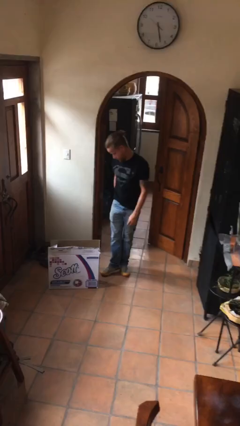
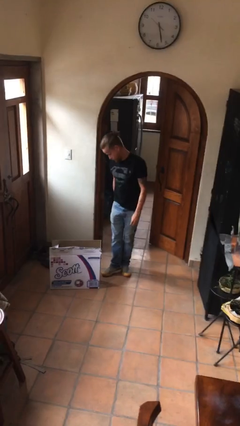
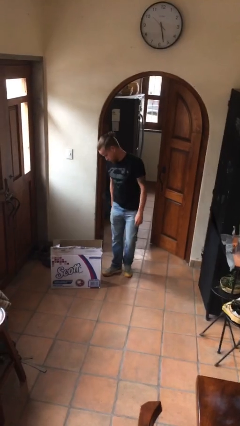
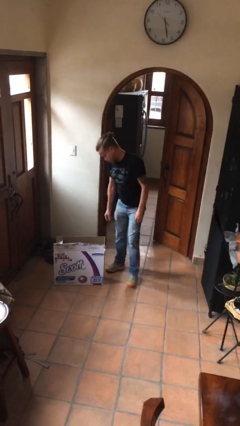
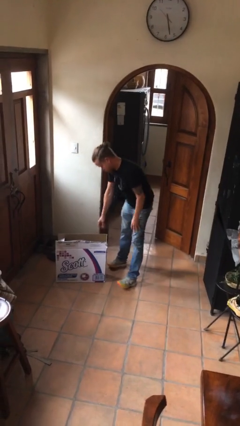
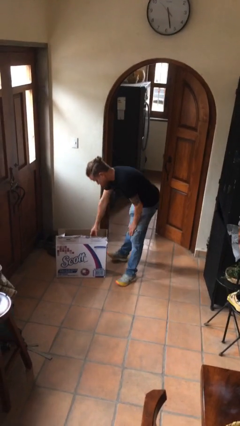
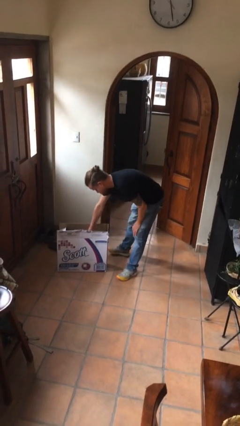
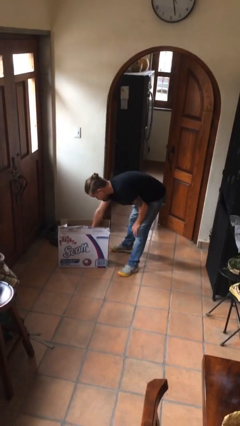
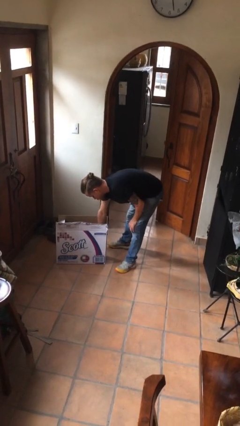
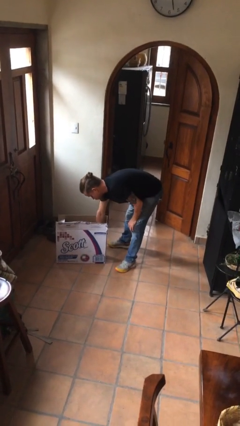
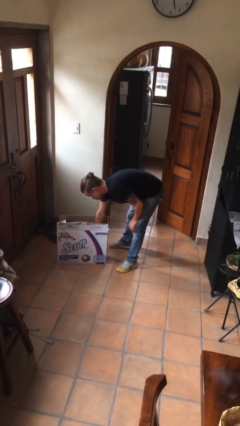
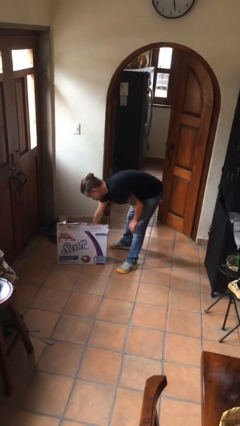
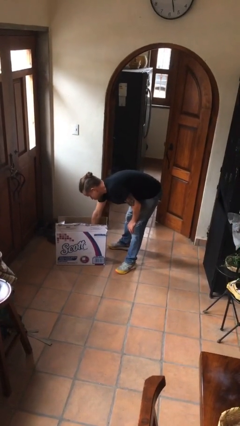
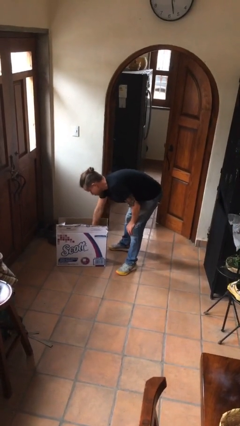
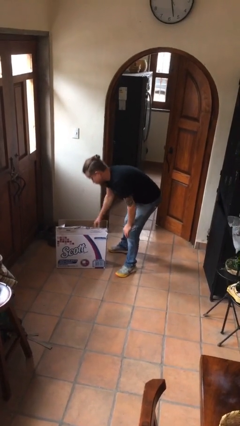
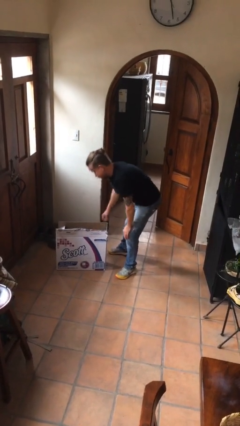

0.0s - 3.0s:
person searches in box

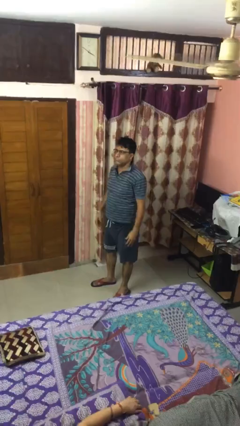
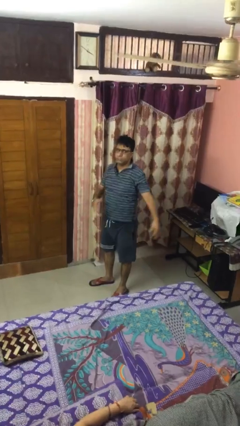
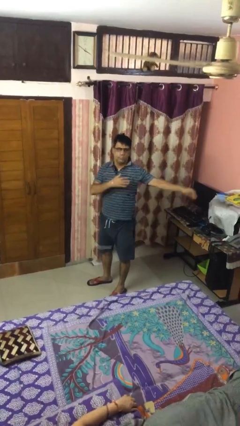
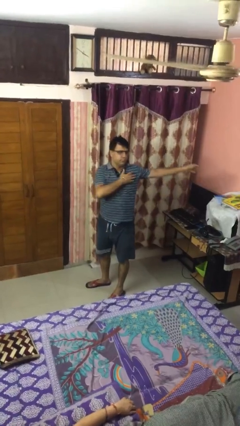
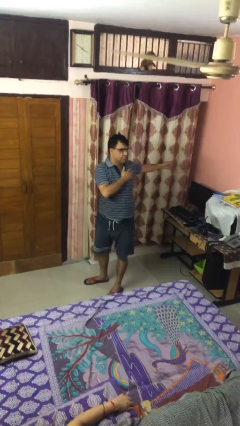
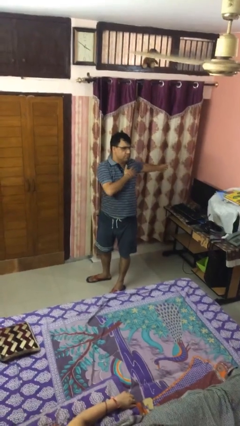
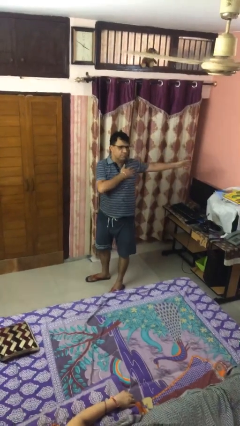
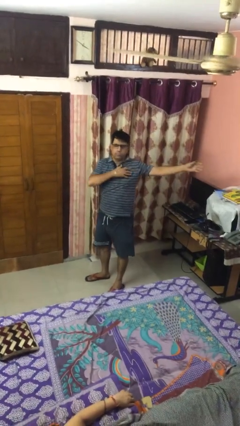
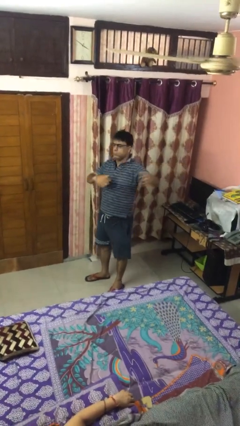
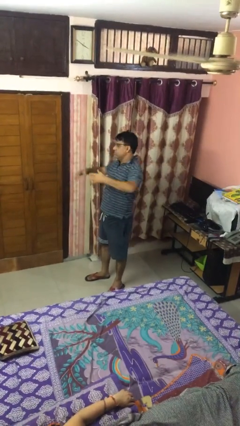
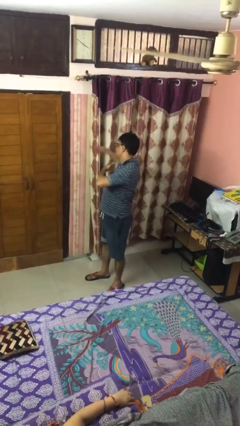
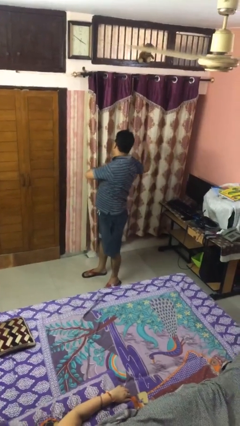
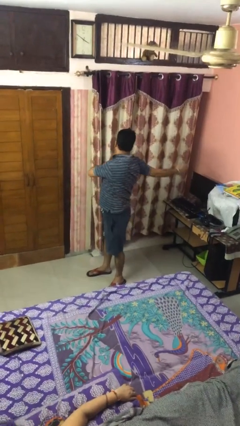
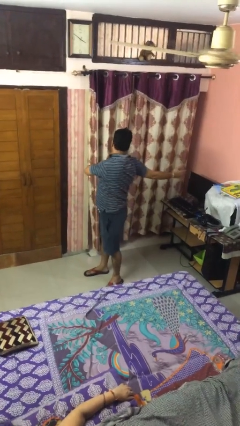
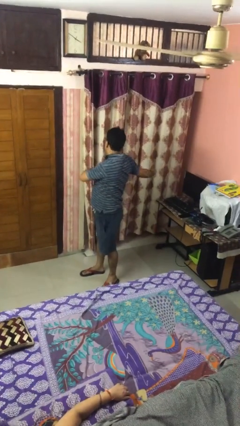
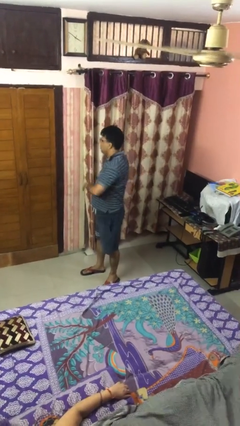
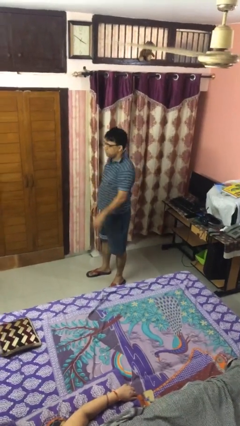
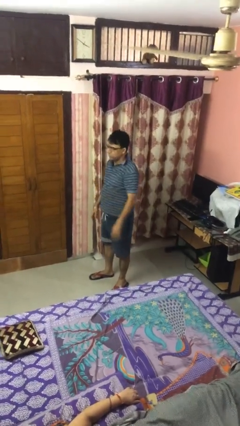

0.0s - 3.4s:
person stretches arms to side

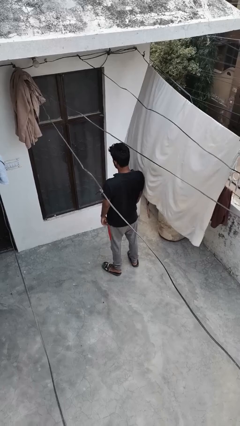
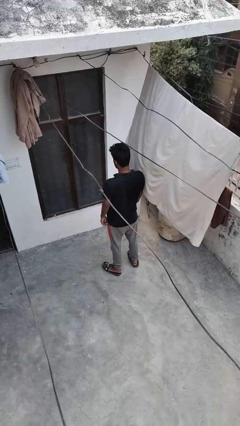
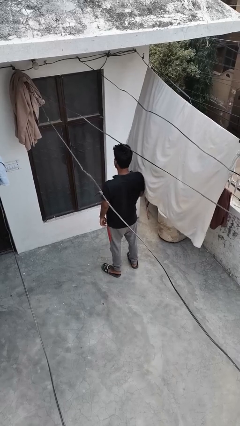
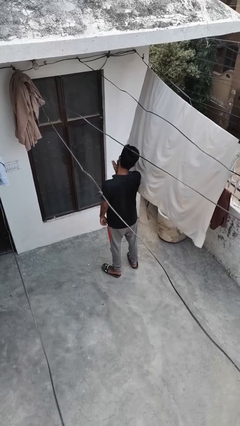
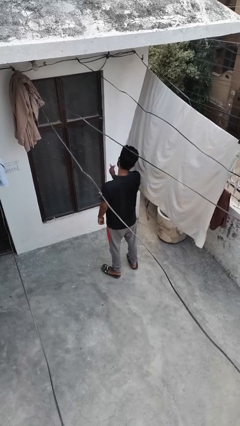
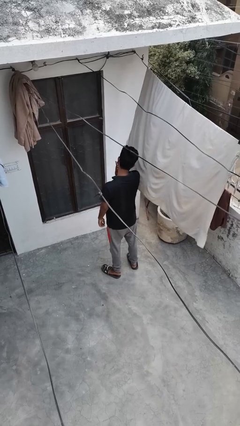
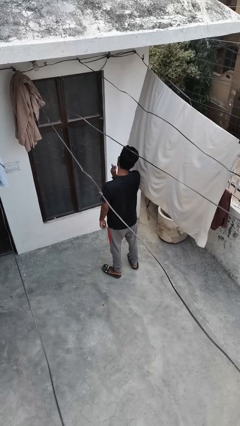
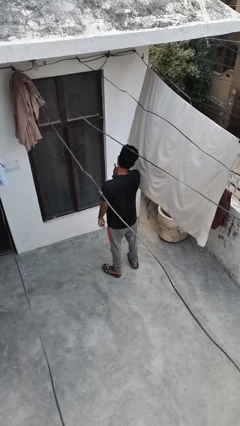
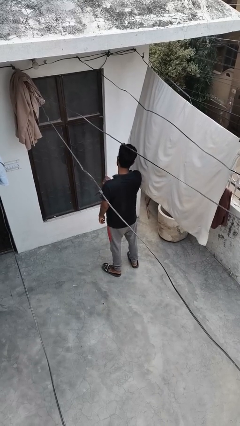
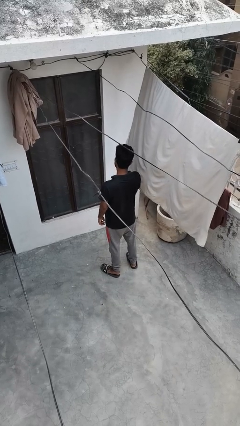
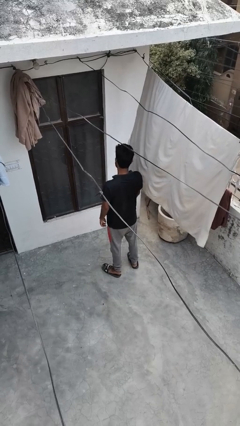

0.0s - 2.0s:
person swats bug

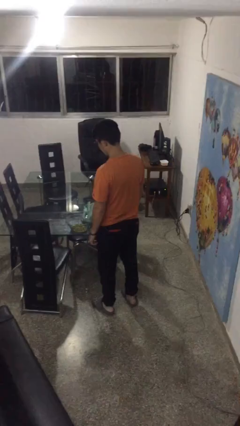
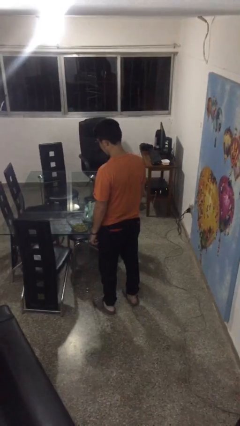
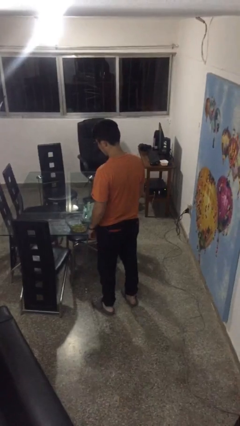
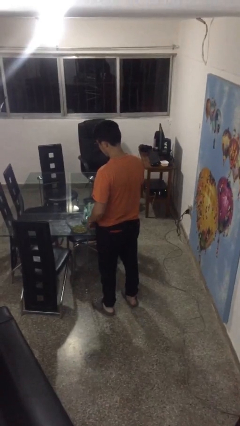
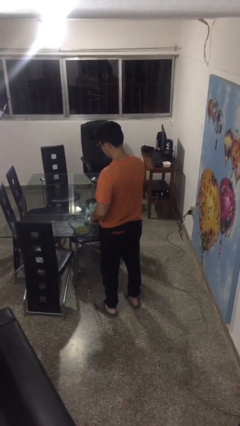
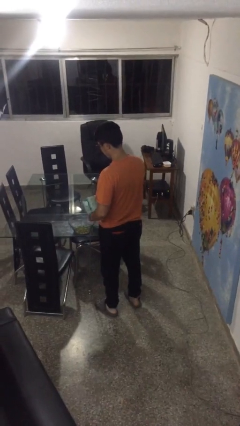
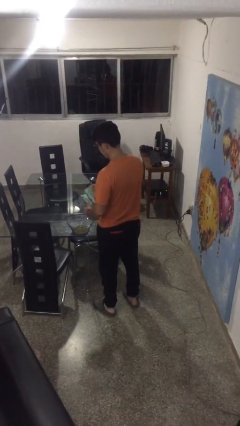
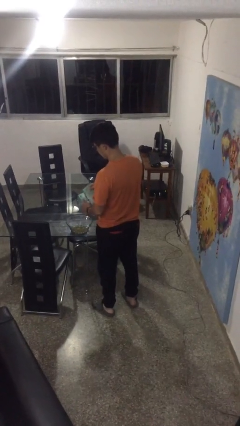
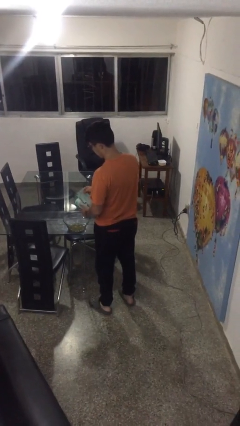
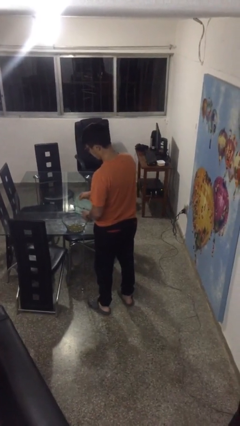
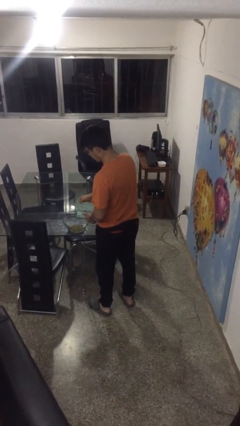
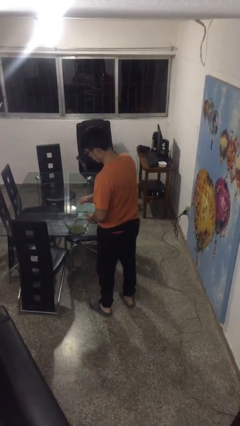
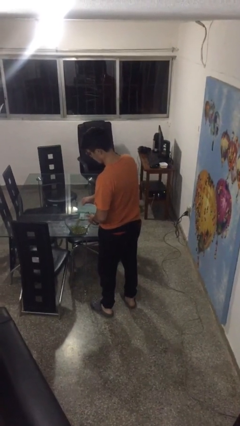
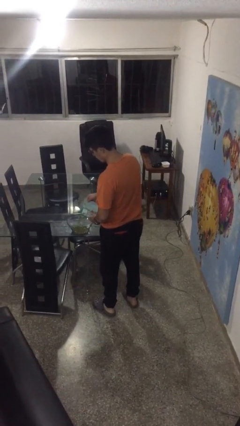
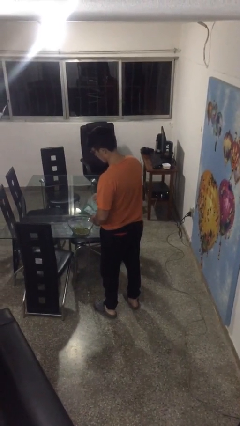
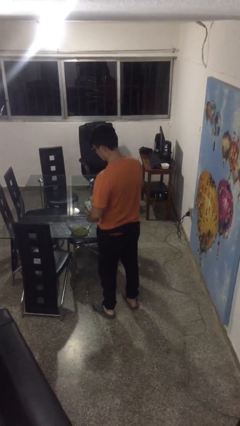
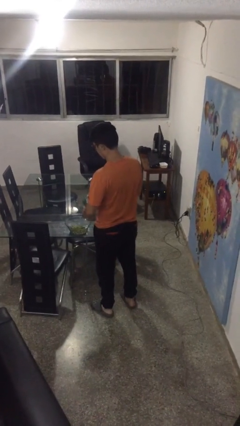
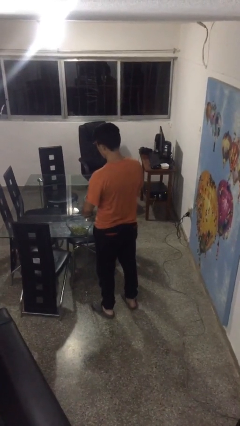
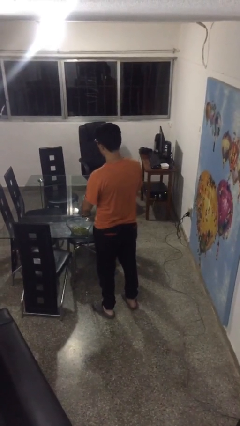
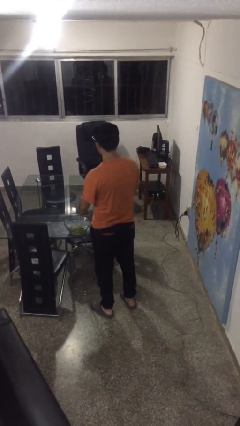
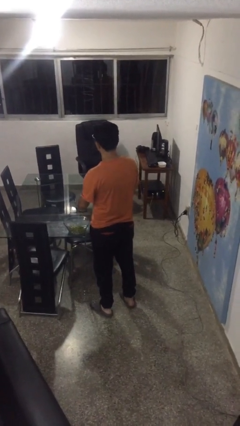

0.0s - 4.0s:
person pours into bowl

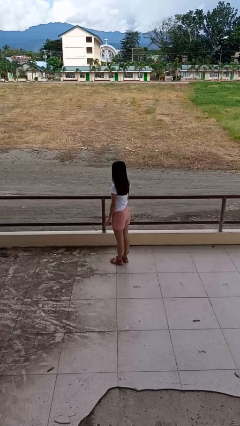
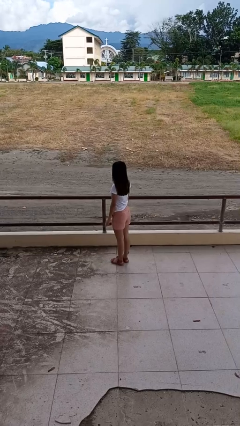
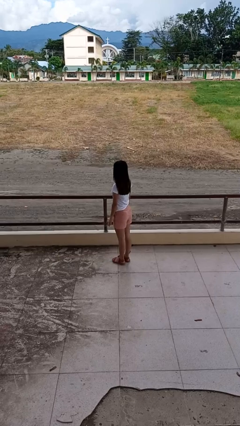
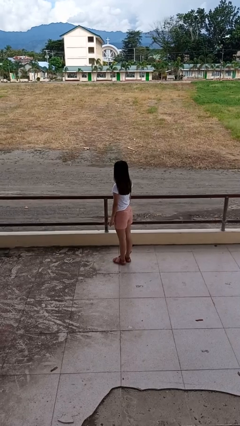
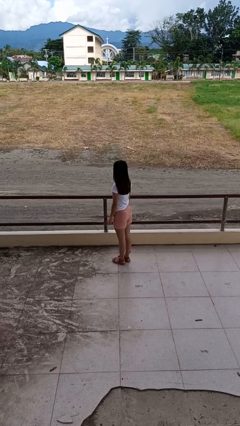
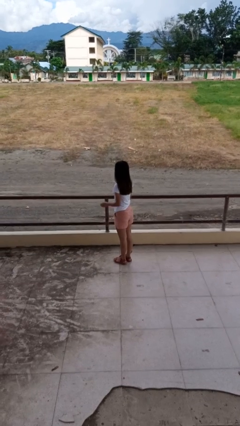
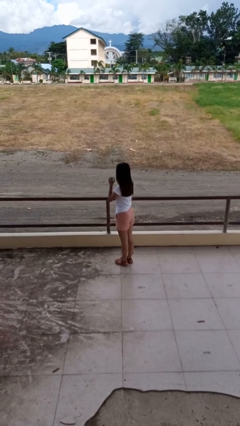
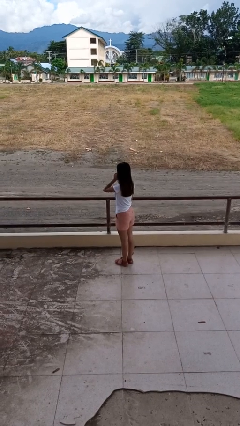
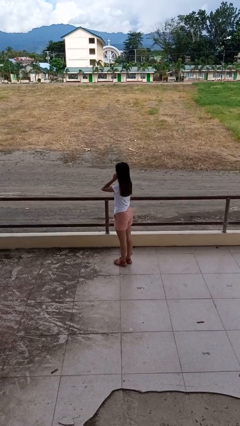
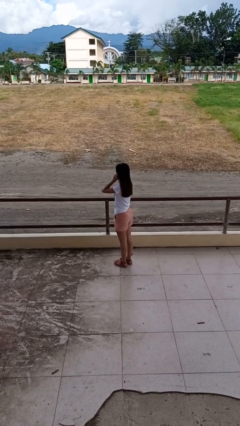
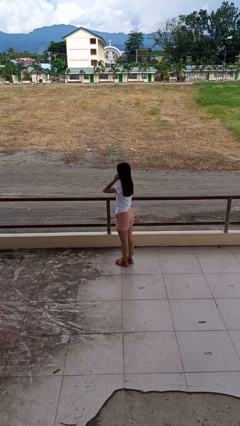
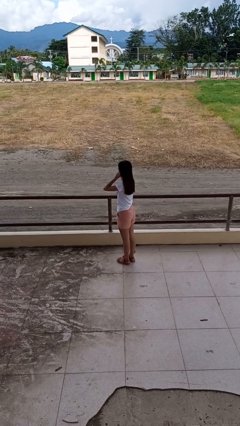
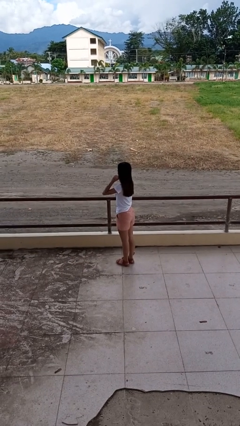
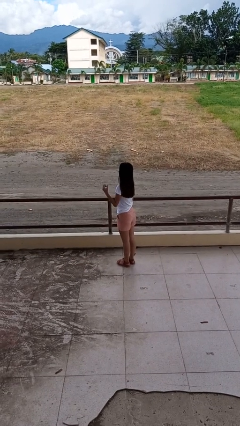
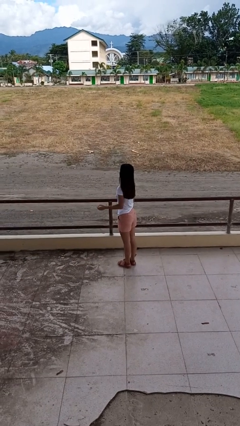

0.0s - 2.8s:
person touches earlobe

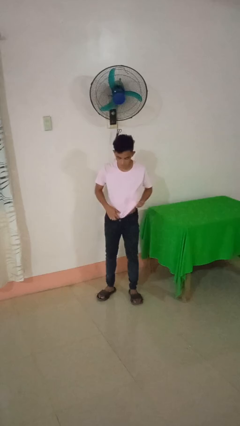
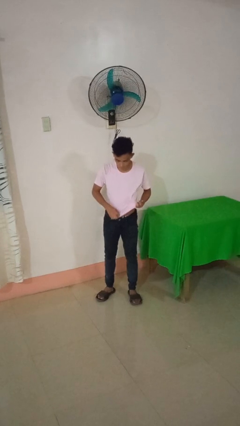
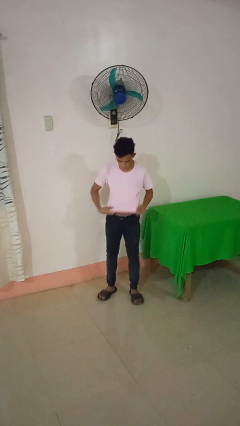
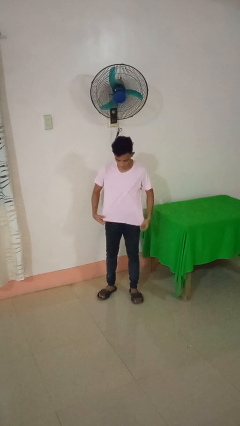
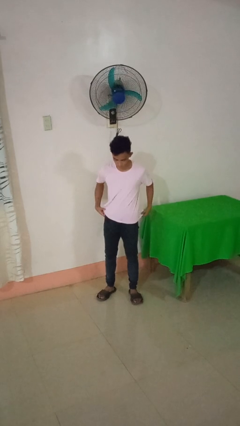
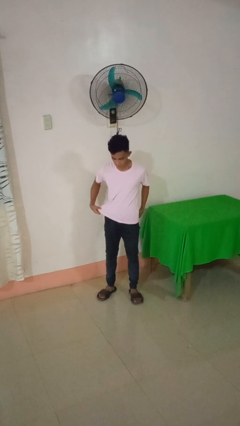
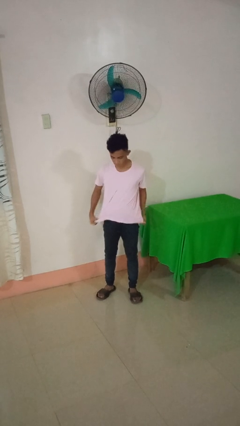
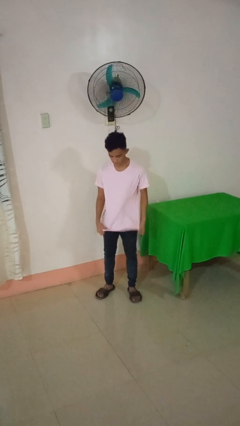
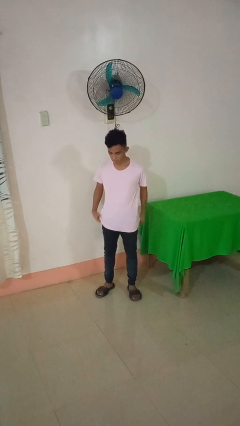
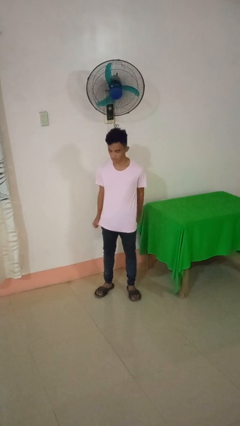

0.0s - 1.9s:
person untucks shirt

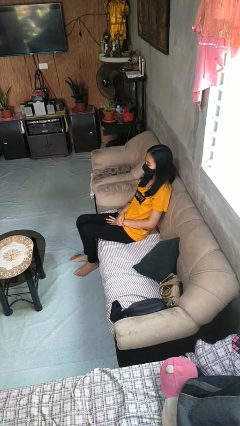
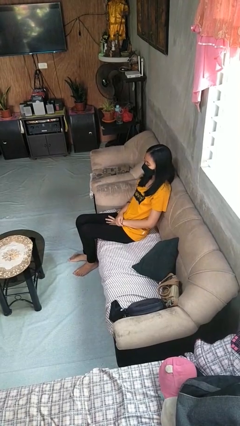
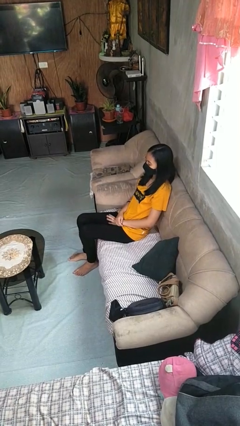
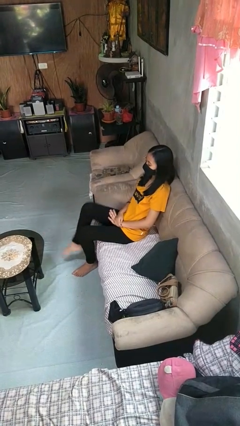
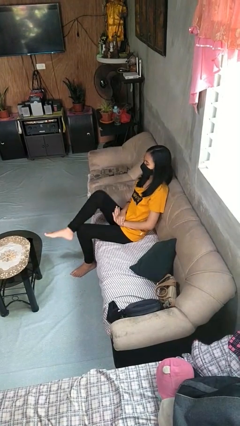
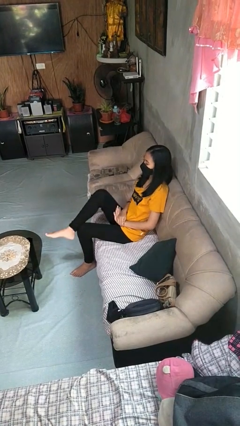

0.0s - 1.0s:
person crosses legs
